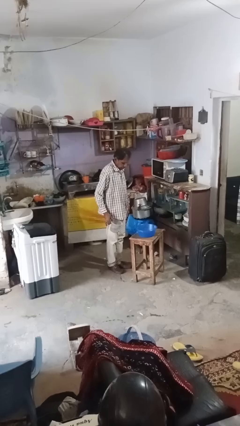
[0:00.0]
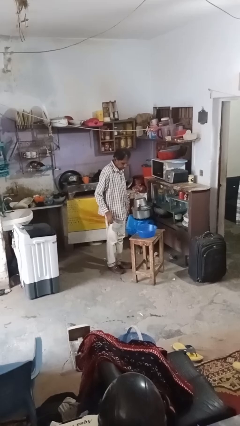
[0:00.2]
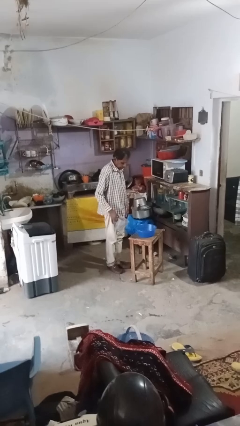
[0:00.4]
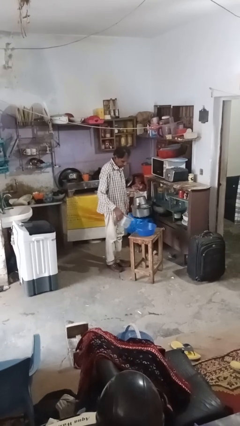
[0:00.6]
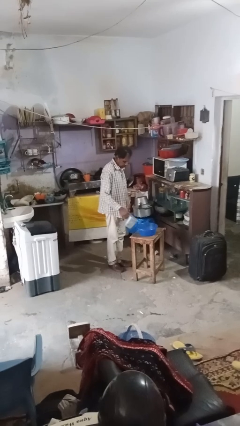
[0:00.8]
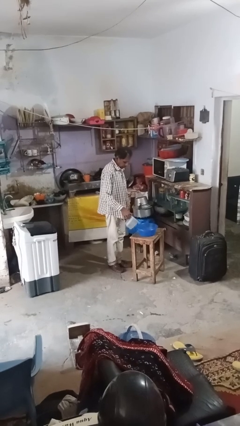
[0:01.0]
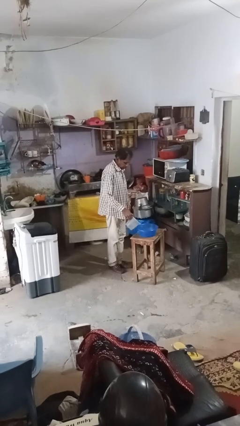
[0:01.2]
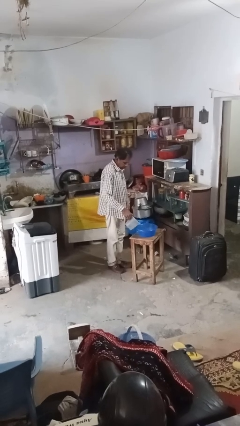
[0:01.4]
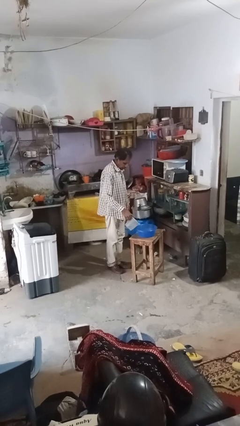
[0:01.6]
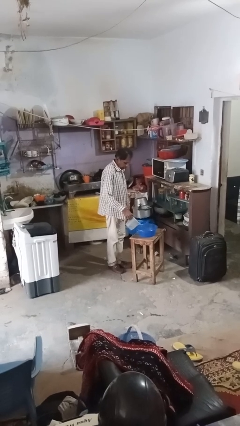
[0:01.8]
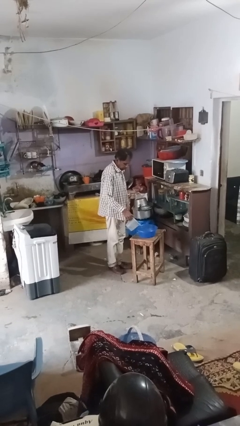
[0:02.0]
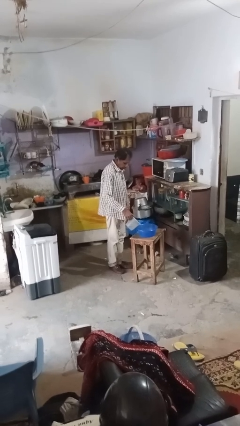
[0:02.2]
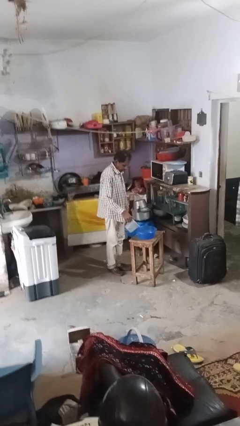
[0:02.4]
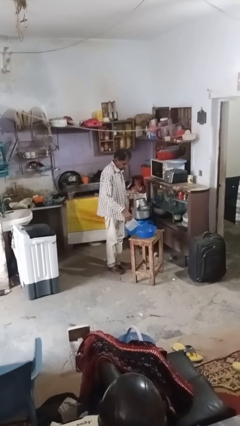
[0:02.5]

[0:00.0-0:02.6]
person pours into bowl

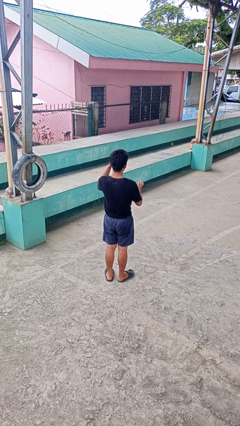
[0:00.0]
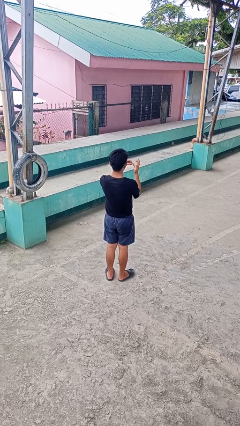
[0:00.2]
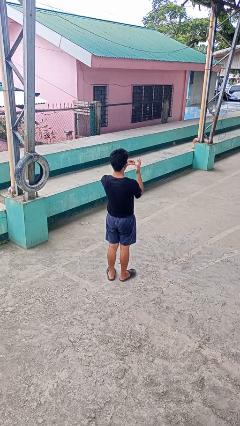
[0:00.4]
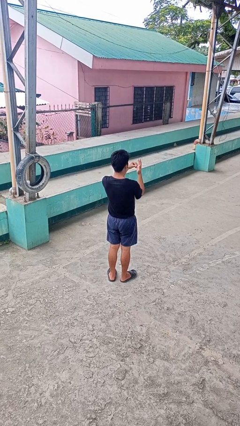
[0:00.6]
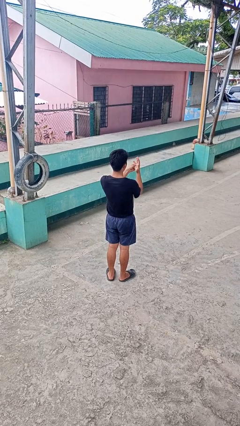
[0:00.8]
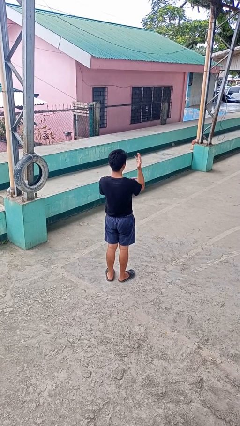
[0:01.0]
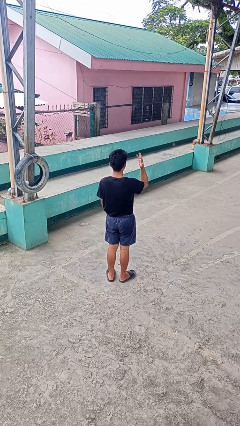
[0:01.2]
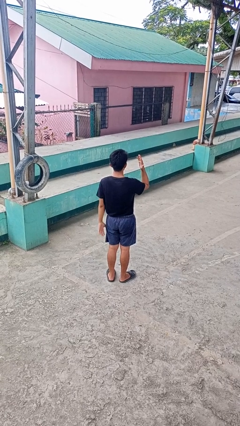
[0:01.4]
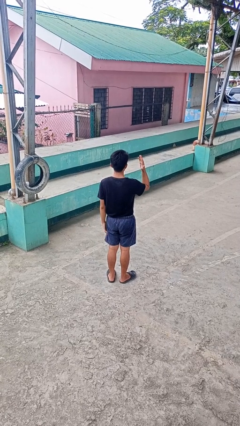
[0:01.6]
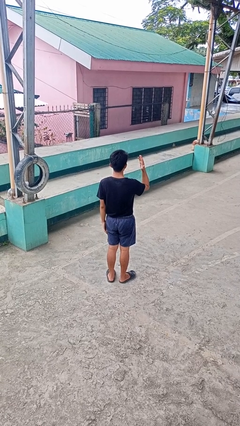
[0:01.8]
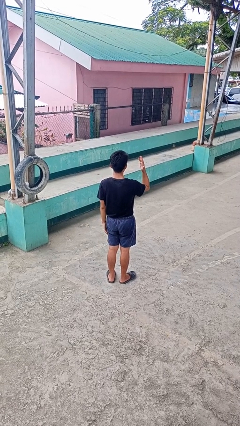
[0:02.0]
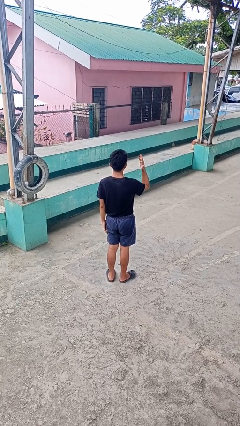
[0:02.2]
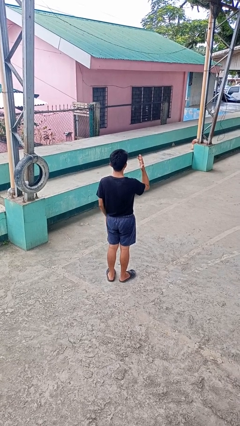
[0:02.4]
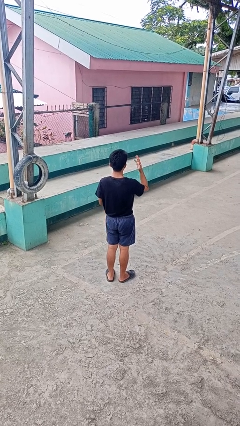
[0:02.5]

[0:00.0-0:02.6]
person puts on ring

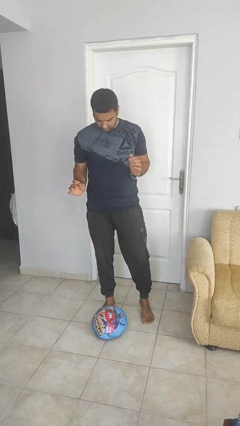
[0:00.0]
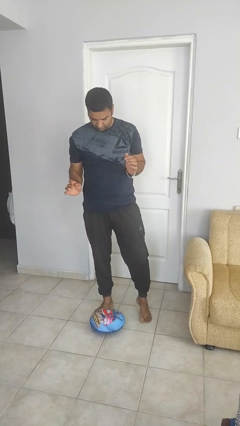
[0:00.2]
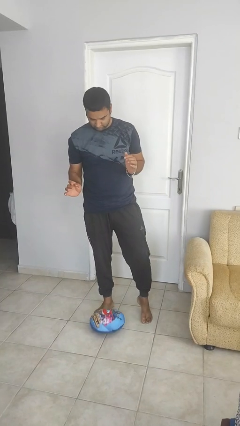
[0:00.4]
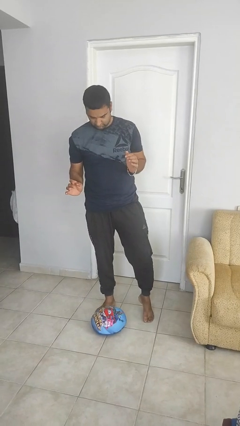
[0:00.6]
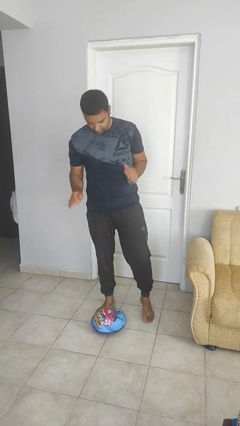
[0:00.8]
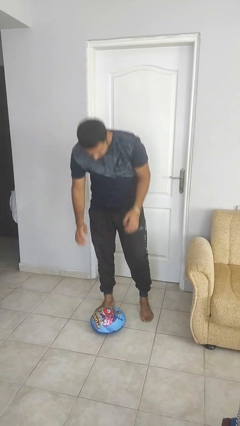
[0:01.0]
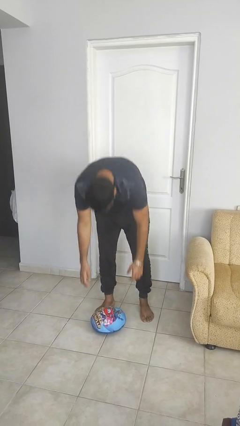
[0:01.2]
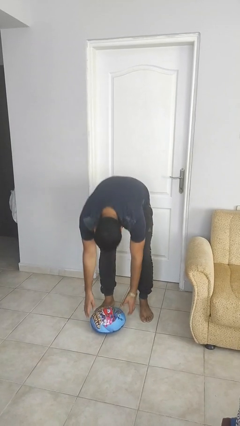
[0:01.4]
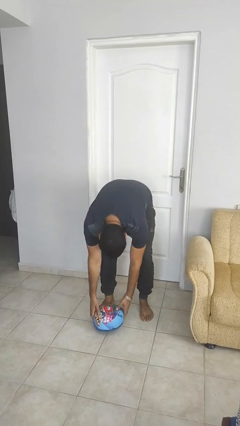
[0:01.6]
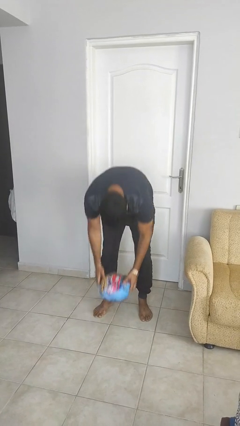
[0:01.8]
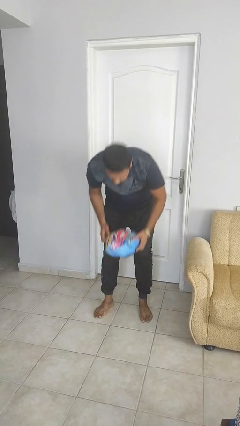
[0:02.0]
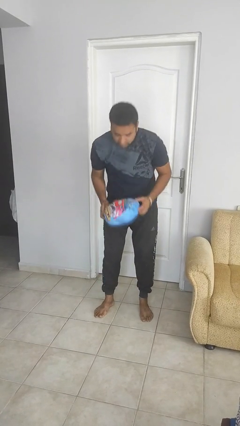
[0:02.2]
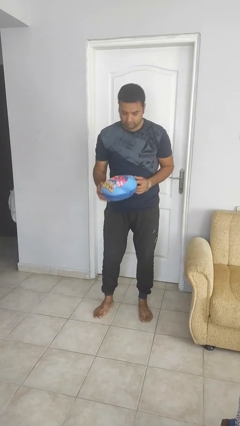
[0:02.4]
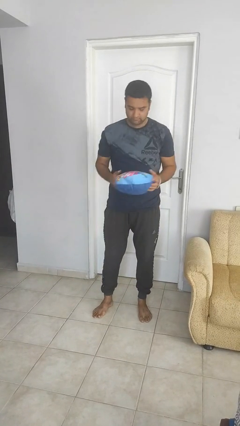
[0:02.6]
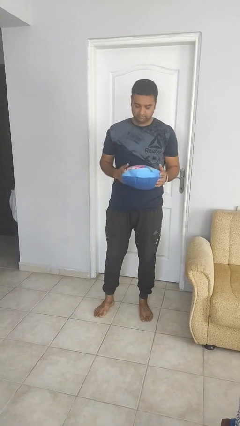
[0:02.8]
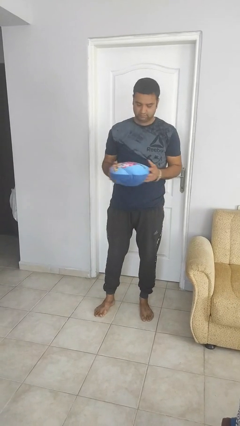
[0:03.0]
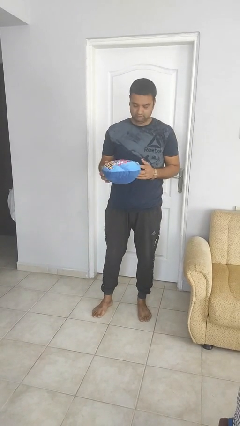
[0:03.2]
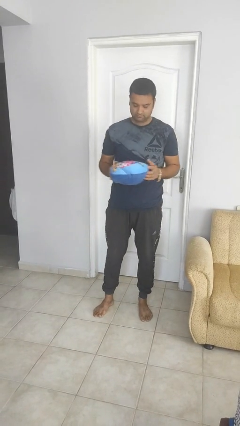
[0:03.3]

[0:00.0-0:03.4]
person picks up object from floor

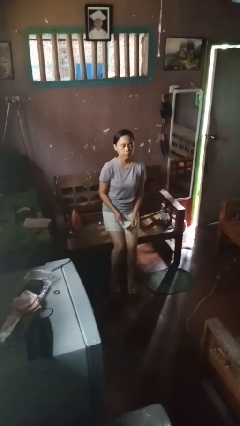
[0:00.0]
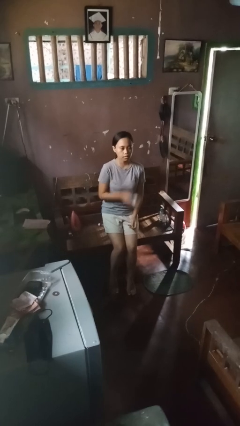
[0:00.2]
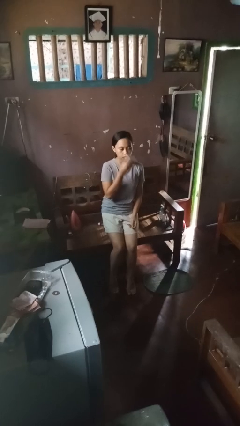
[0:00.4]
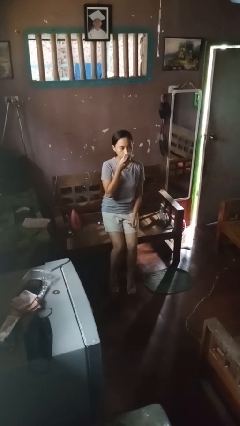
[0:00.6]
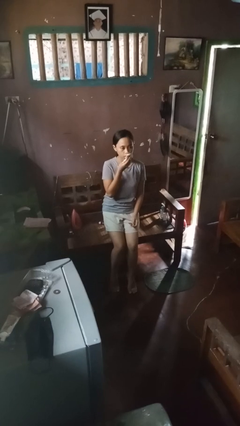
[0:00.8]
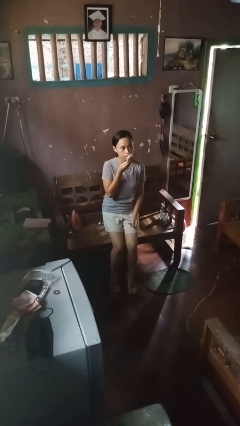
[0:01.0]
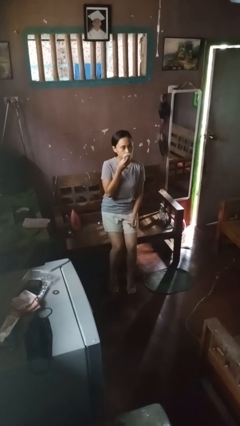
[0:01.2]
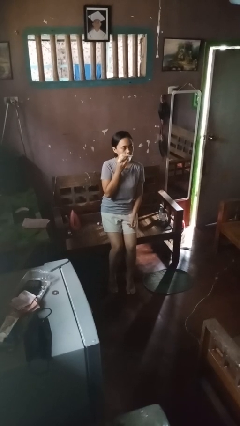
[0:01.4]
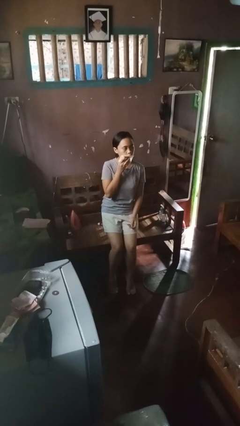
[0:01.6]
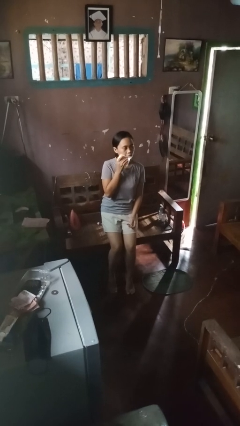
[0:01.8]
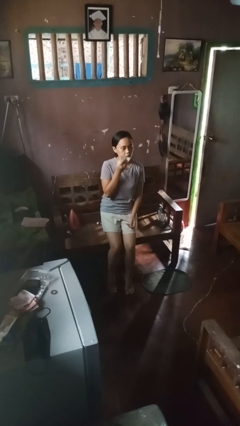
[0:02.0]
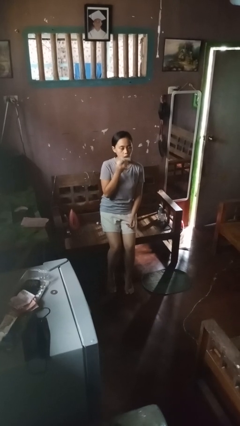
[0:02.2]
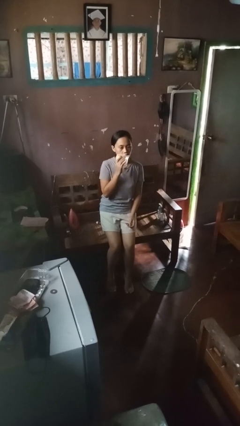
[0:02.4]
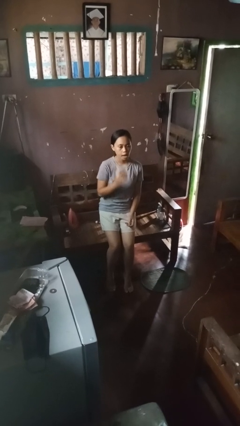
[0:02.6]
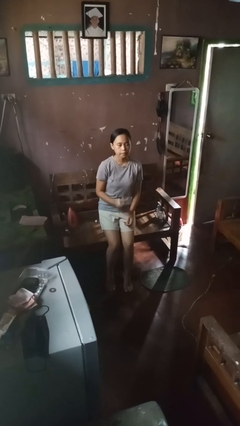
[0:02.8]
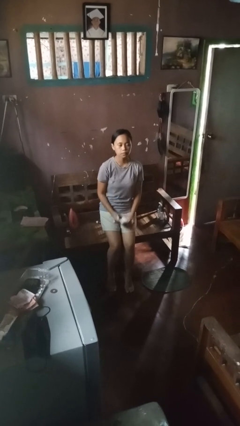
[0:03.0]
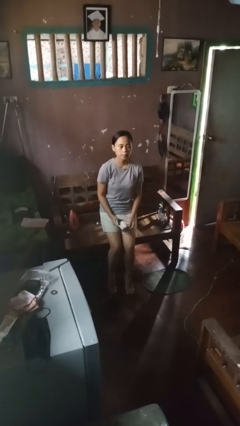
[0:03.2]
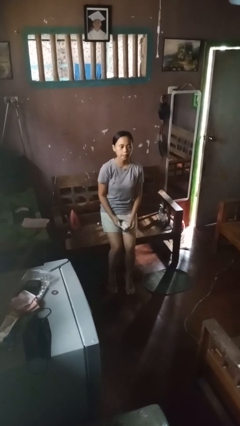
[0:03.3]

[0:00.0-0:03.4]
person wipes mouth with napkin

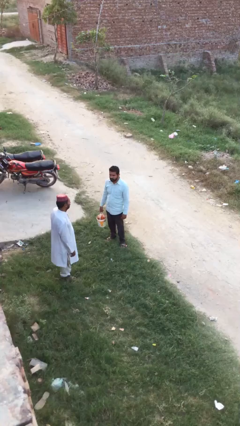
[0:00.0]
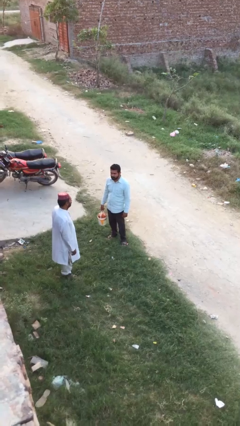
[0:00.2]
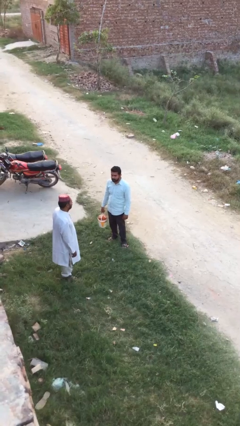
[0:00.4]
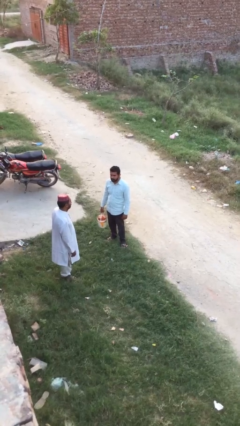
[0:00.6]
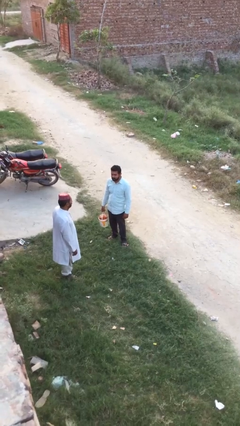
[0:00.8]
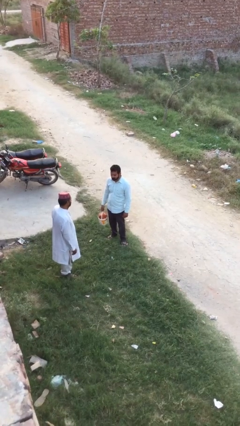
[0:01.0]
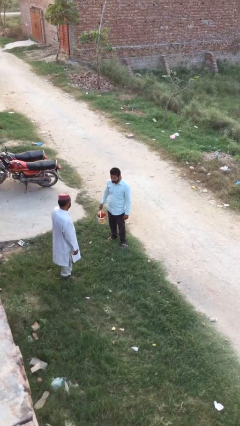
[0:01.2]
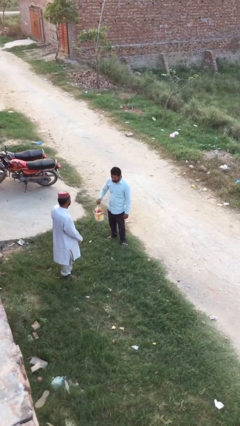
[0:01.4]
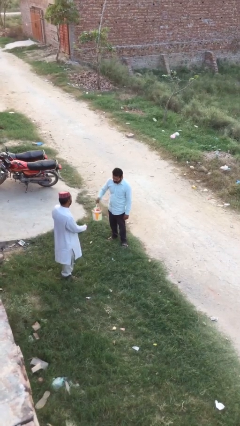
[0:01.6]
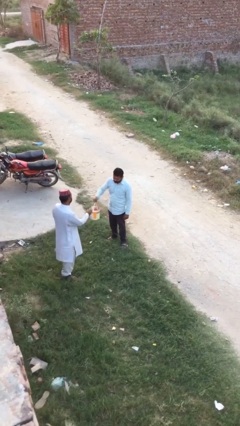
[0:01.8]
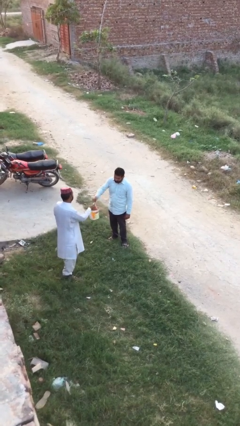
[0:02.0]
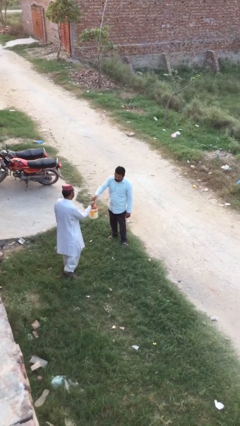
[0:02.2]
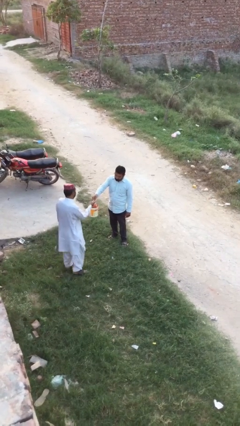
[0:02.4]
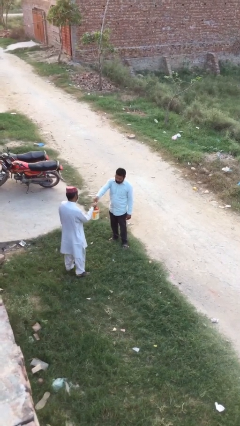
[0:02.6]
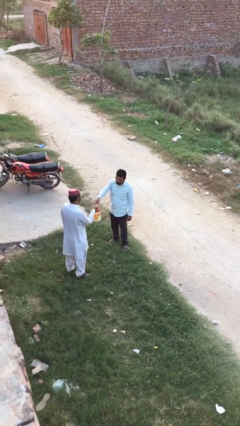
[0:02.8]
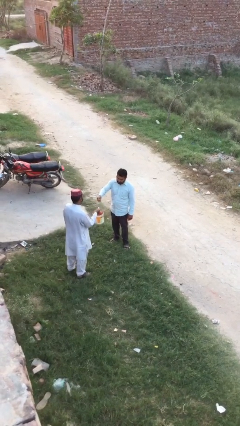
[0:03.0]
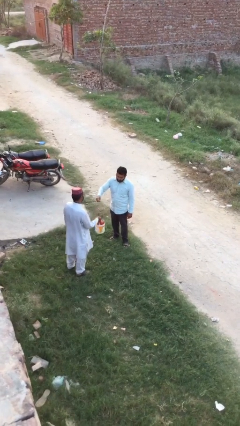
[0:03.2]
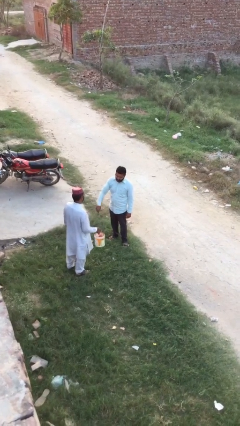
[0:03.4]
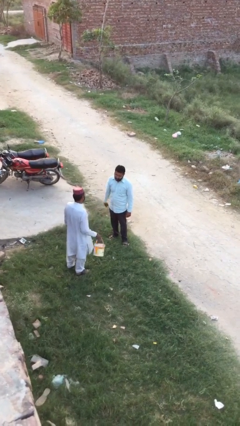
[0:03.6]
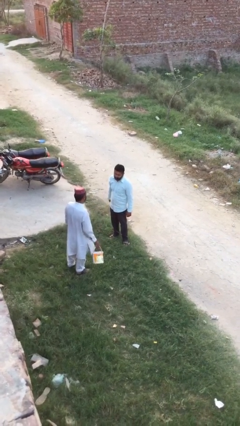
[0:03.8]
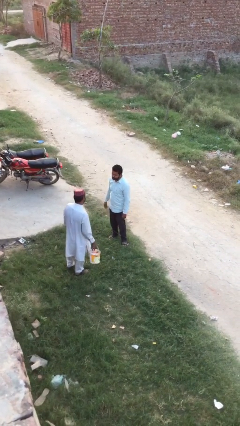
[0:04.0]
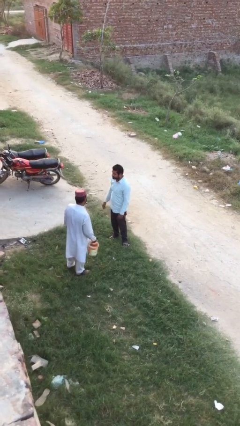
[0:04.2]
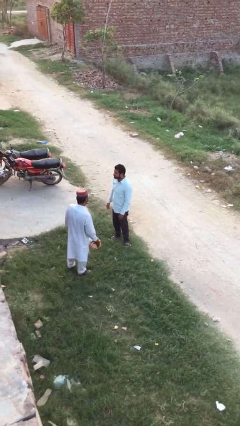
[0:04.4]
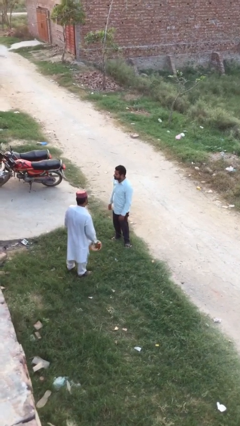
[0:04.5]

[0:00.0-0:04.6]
person transfers object to person

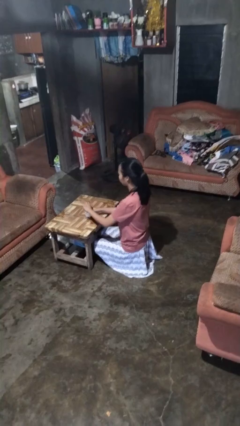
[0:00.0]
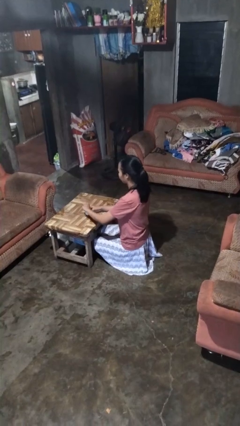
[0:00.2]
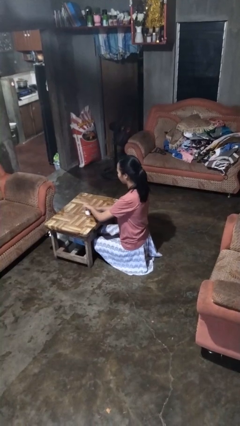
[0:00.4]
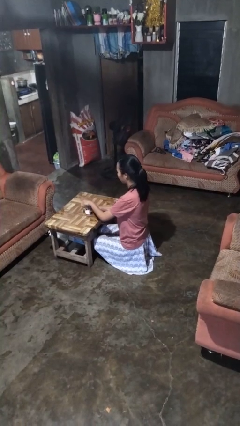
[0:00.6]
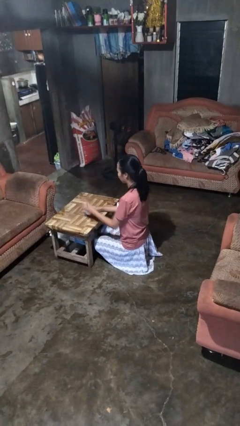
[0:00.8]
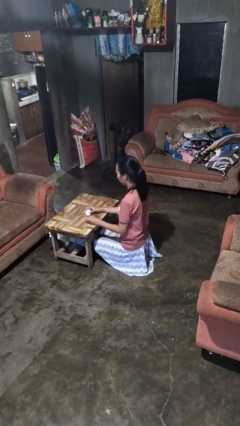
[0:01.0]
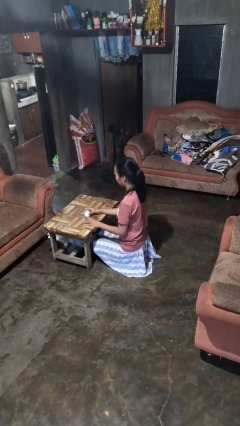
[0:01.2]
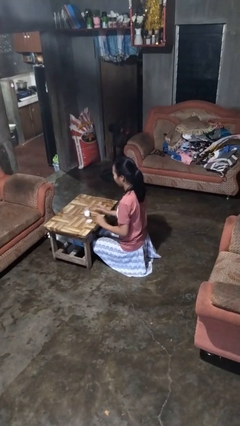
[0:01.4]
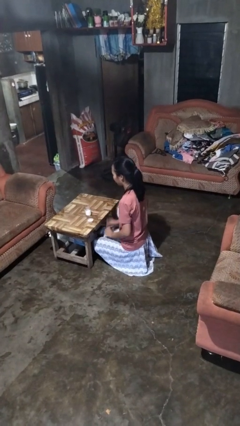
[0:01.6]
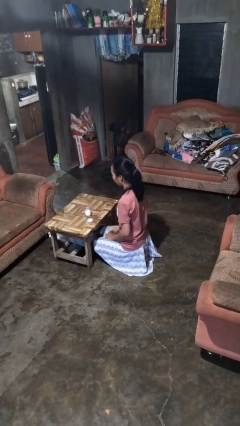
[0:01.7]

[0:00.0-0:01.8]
person opens jar
